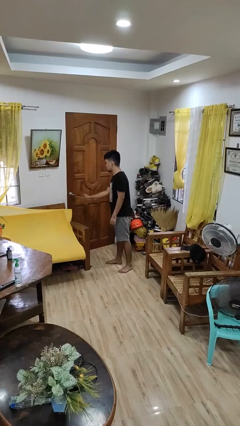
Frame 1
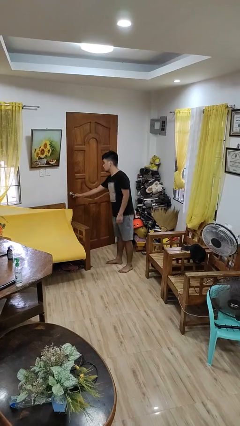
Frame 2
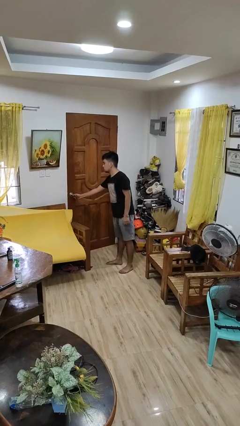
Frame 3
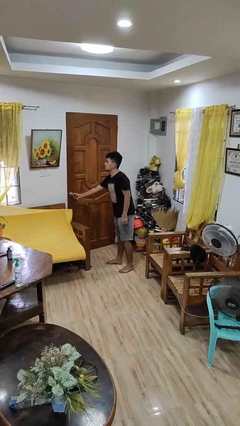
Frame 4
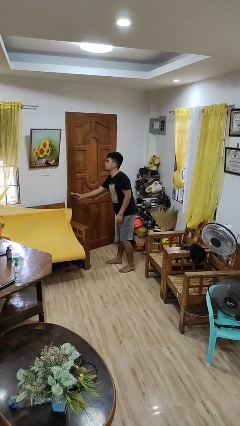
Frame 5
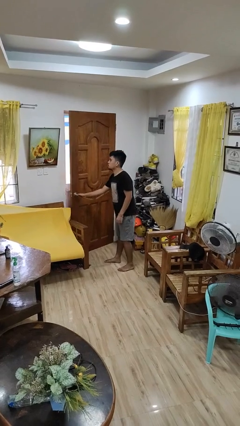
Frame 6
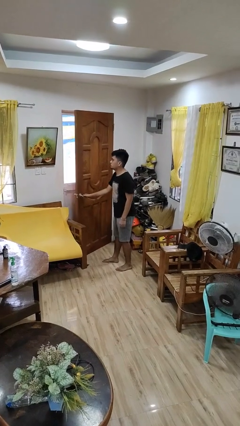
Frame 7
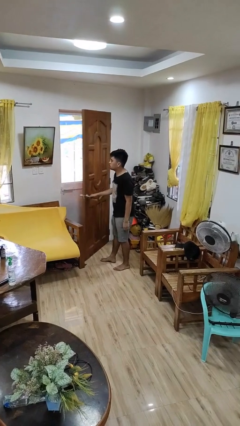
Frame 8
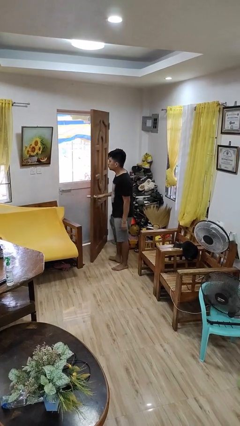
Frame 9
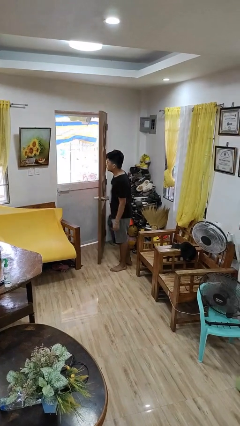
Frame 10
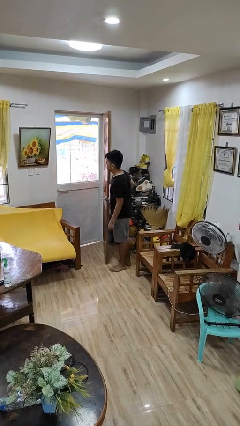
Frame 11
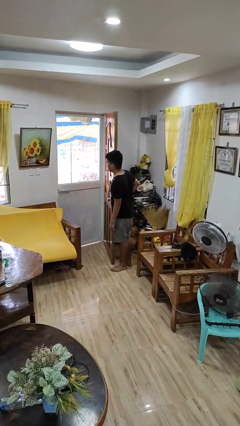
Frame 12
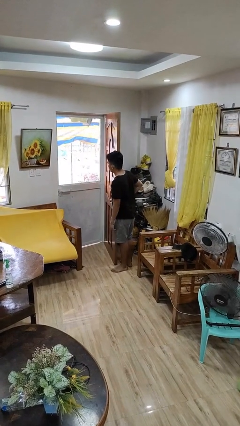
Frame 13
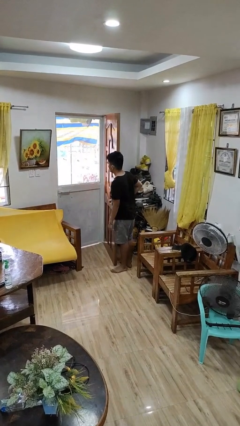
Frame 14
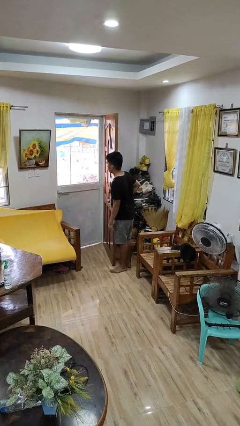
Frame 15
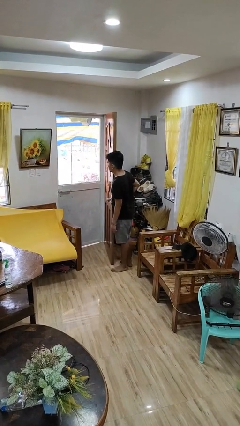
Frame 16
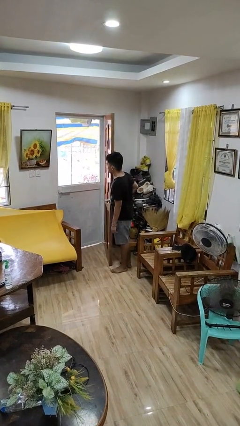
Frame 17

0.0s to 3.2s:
person opens facility door

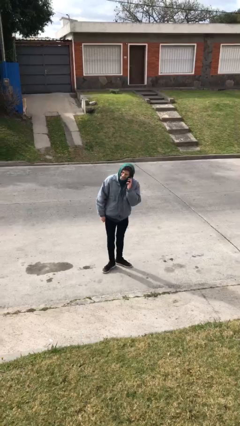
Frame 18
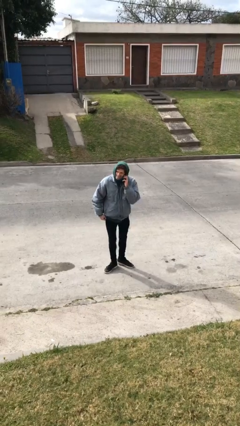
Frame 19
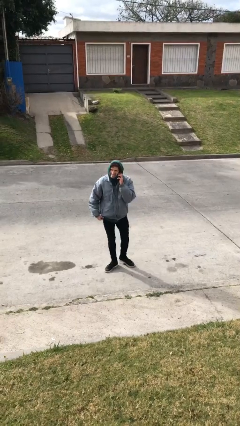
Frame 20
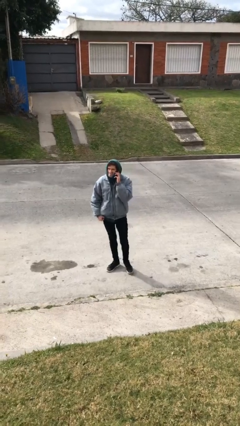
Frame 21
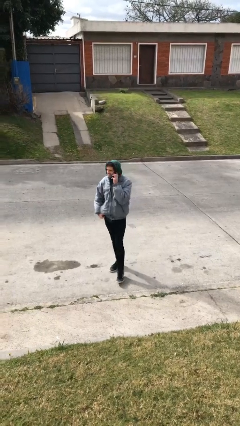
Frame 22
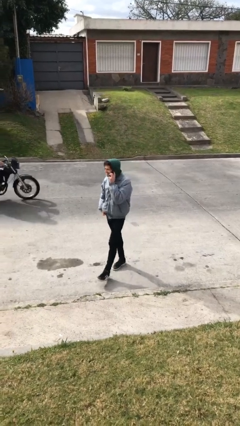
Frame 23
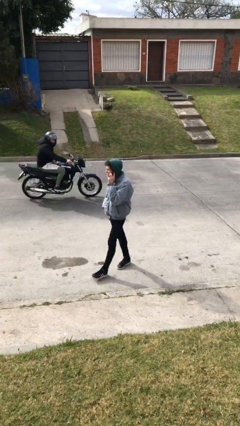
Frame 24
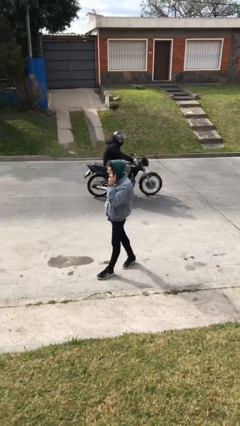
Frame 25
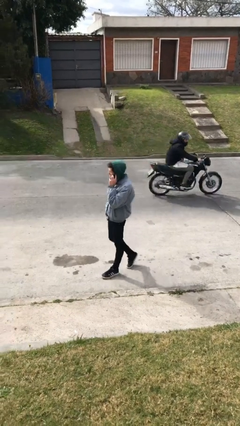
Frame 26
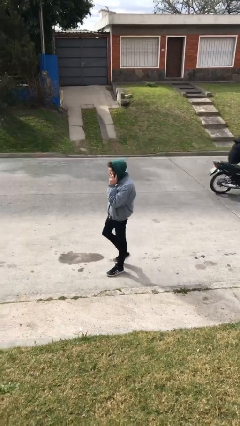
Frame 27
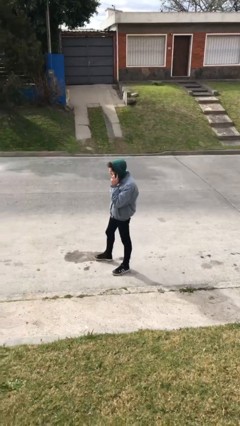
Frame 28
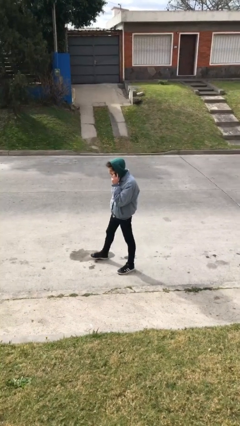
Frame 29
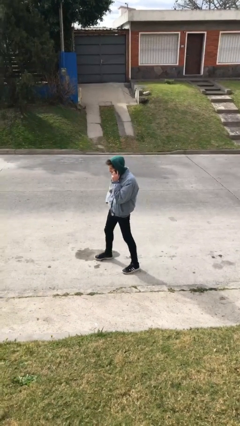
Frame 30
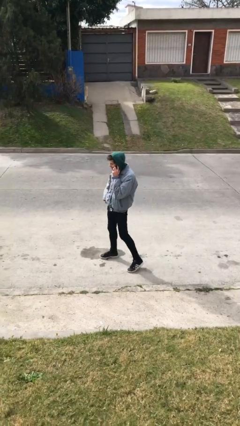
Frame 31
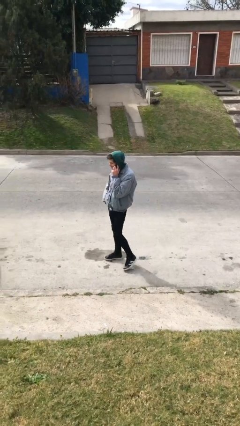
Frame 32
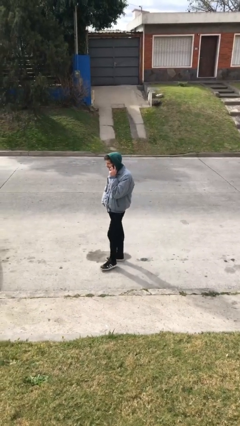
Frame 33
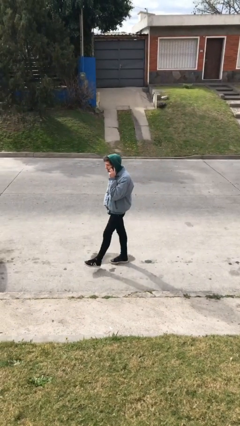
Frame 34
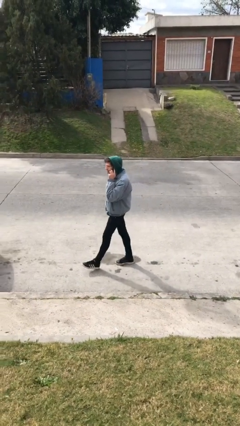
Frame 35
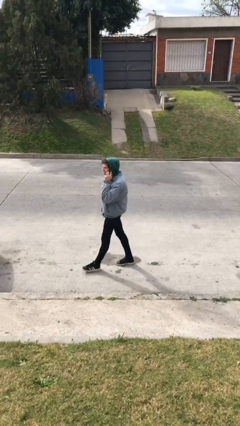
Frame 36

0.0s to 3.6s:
person talks on phone

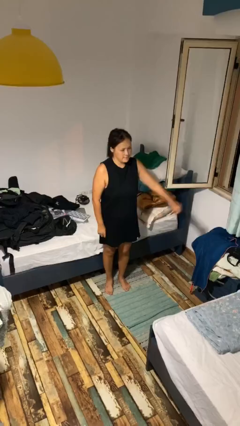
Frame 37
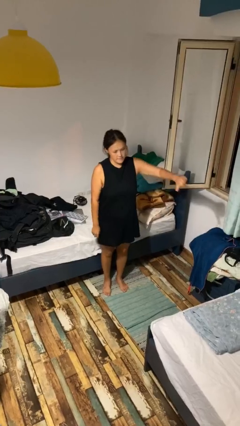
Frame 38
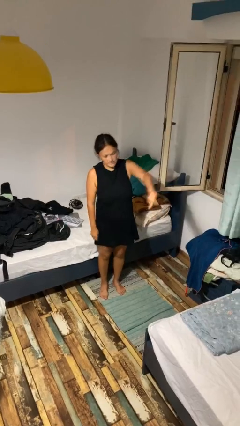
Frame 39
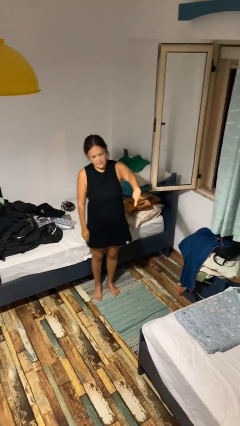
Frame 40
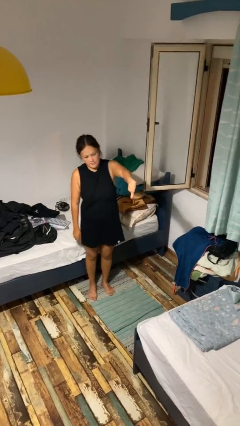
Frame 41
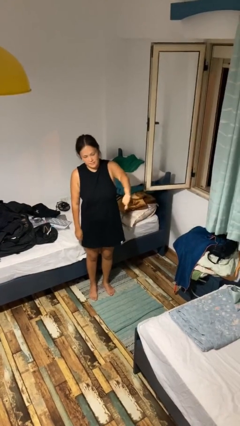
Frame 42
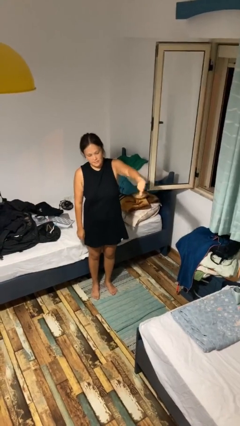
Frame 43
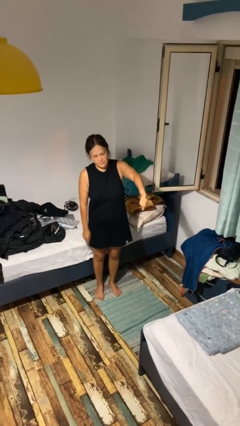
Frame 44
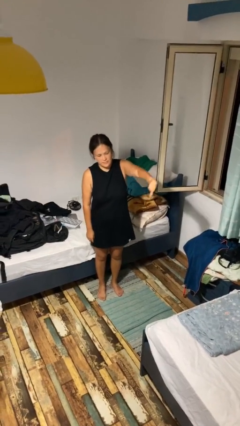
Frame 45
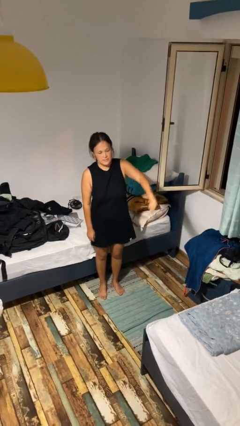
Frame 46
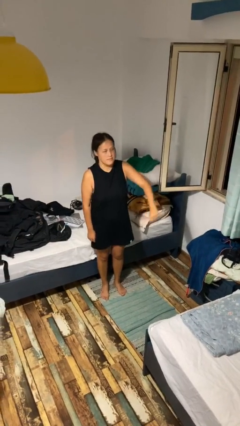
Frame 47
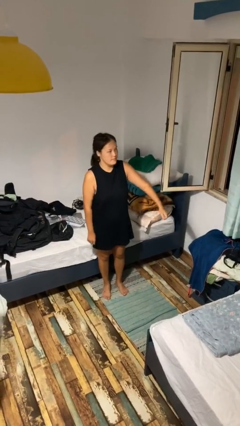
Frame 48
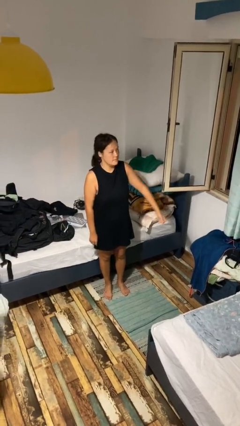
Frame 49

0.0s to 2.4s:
person gestures thumbs down

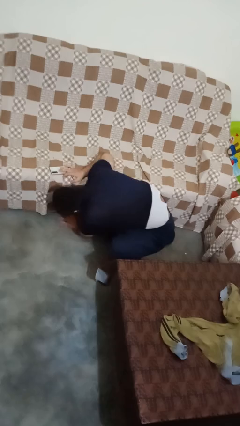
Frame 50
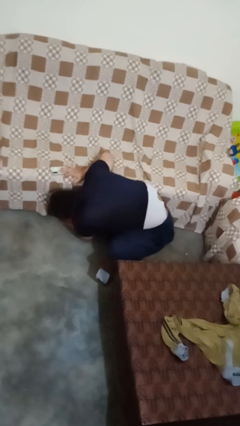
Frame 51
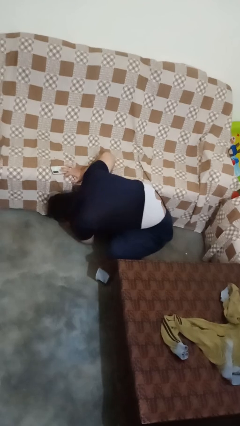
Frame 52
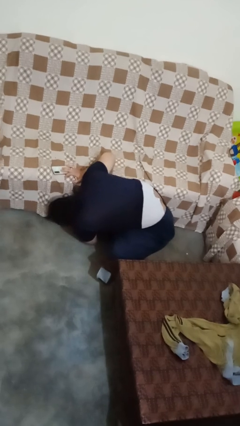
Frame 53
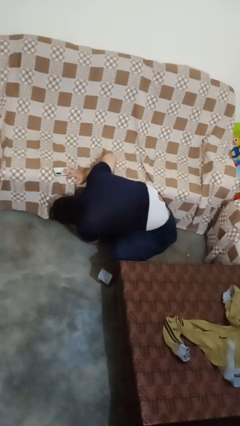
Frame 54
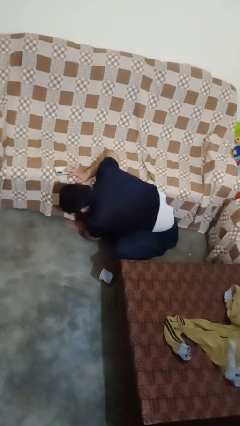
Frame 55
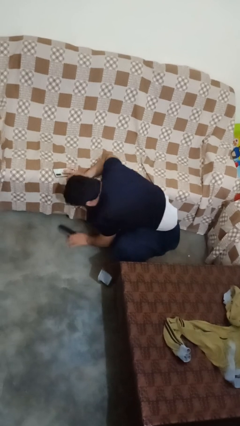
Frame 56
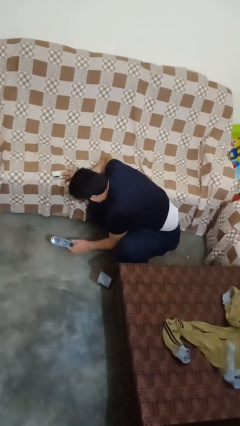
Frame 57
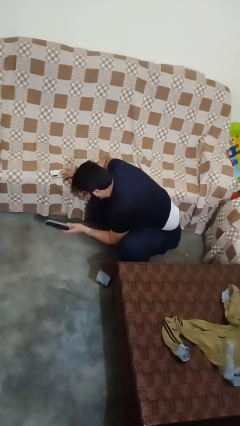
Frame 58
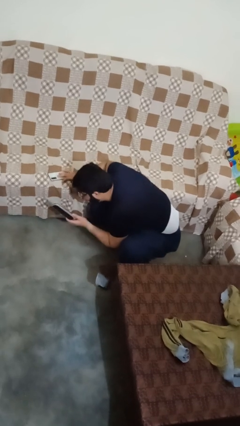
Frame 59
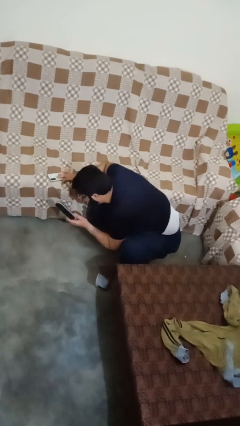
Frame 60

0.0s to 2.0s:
person searches under couch

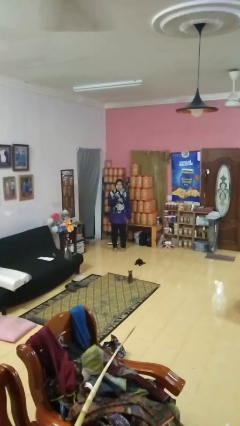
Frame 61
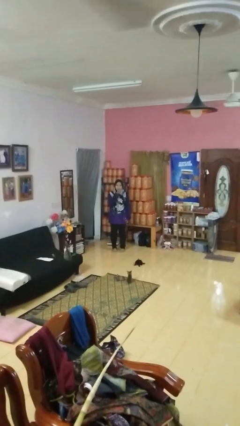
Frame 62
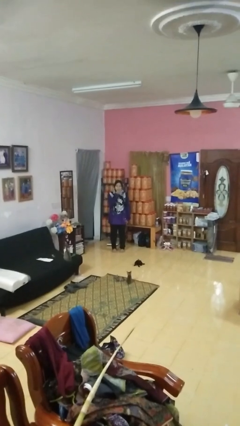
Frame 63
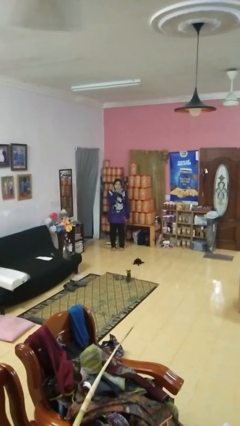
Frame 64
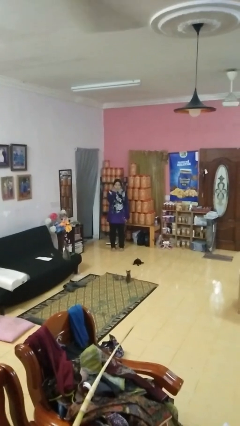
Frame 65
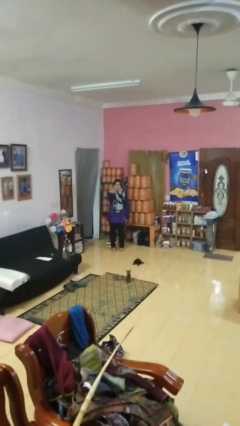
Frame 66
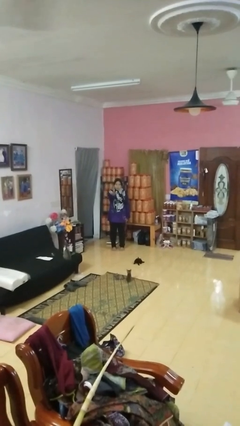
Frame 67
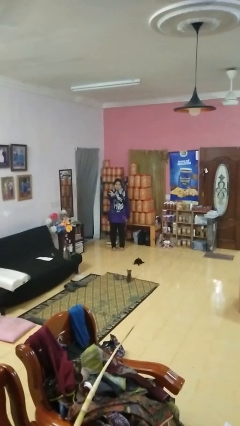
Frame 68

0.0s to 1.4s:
person gestures blow kiss

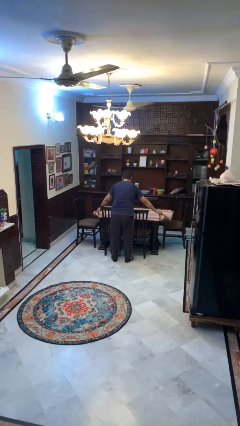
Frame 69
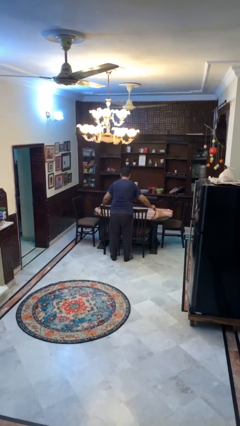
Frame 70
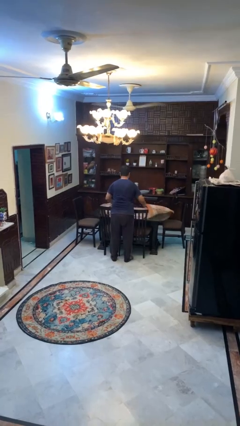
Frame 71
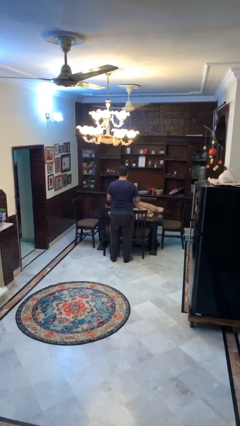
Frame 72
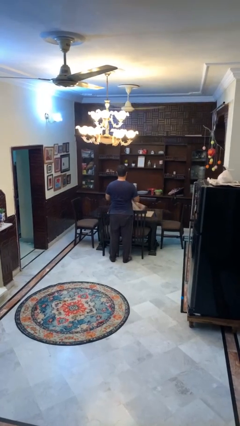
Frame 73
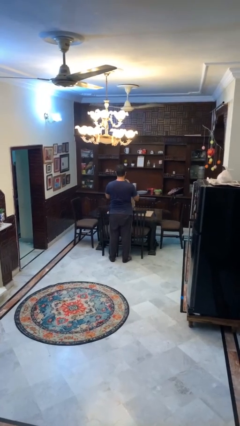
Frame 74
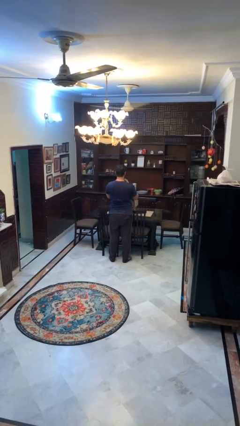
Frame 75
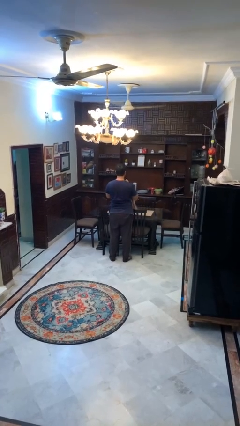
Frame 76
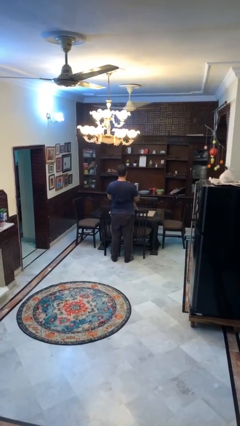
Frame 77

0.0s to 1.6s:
person folds tablecloth

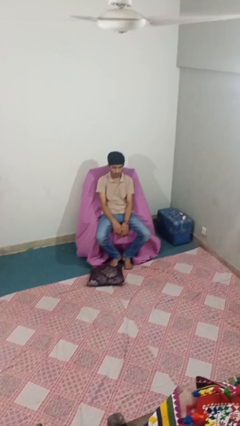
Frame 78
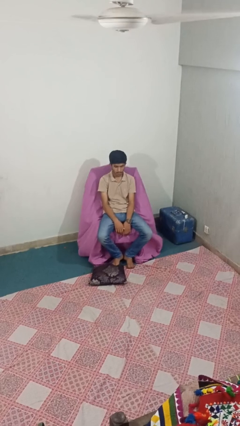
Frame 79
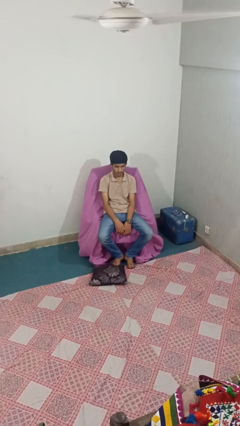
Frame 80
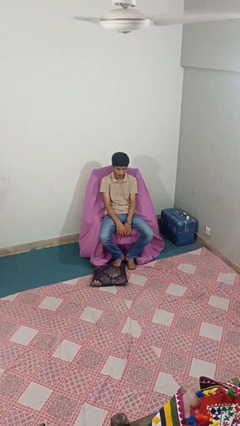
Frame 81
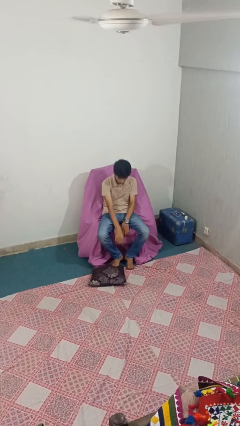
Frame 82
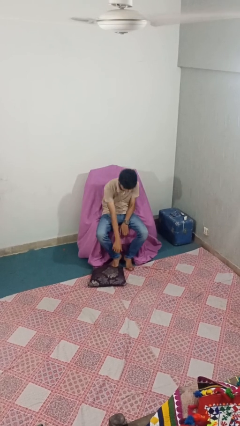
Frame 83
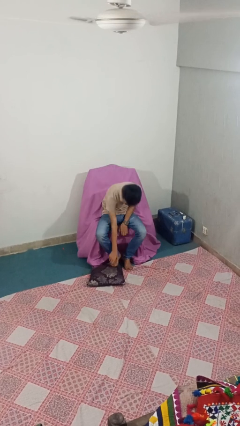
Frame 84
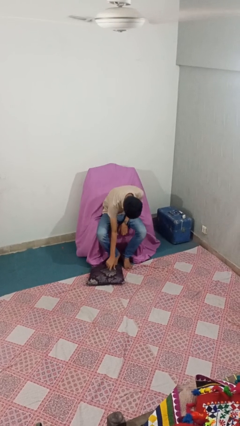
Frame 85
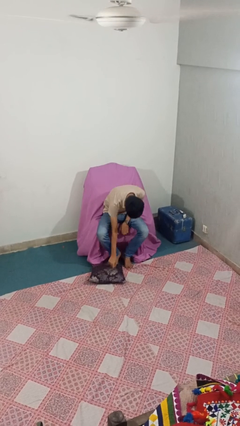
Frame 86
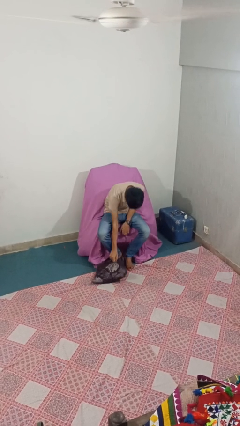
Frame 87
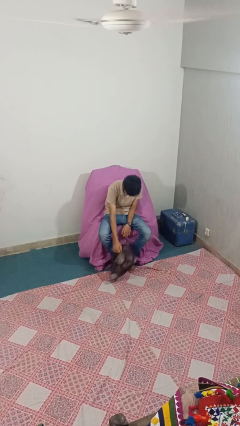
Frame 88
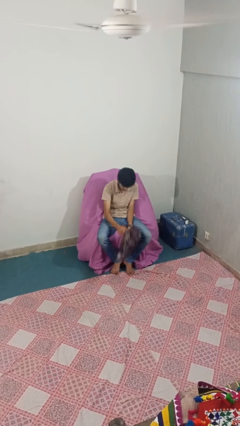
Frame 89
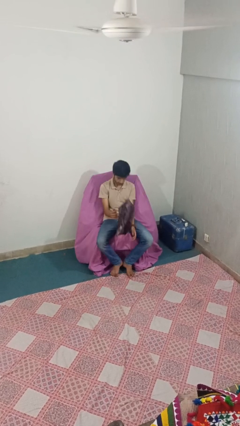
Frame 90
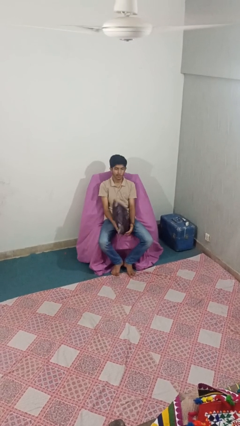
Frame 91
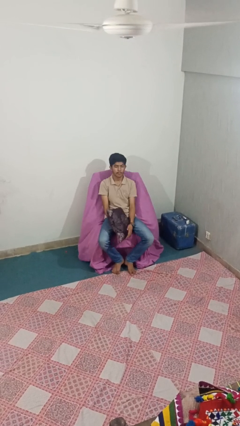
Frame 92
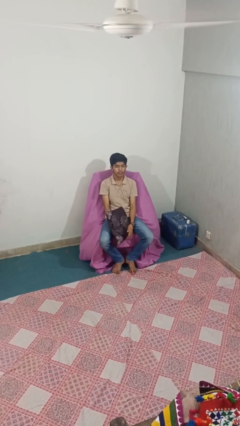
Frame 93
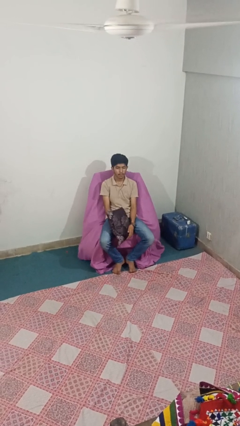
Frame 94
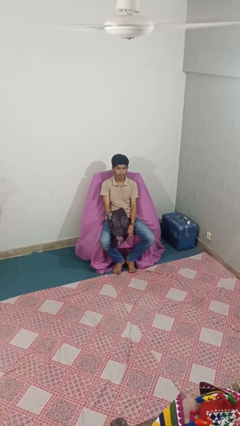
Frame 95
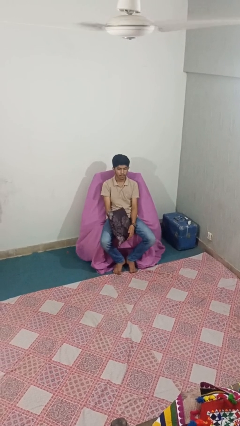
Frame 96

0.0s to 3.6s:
person picks up object from floor
